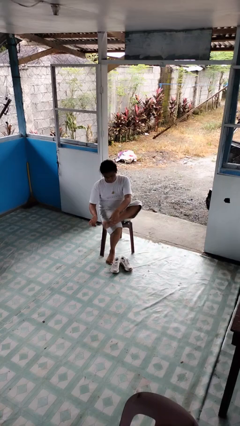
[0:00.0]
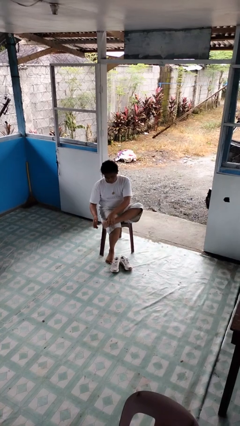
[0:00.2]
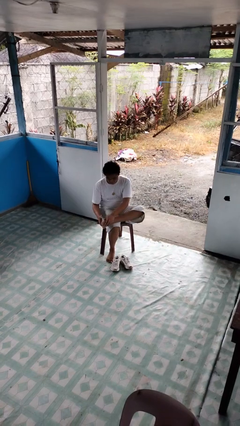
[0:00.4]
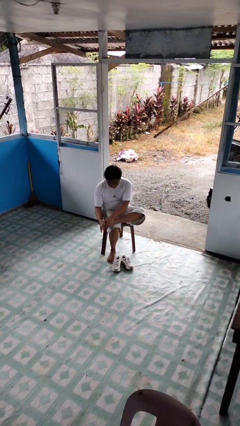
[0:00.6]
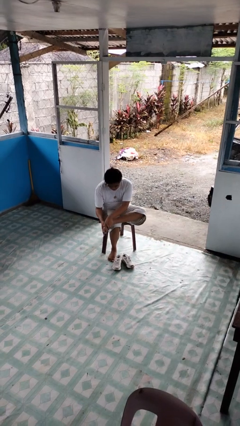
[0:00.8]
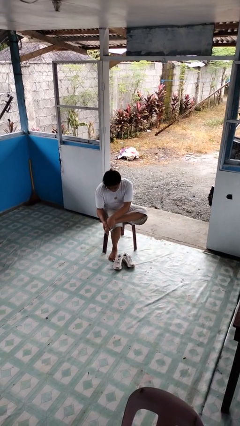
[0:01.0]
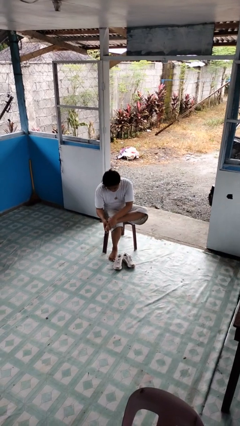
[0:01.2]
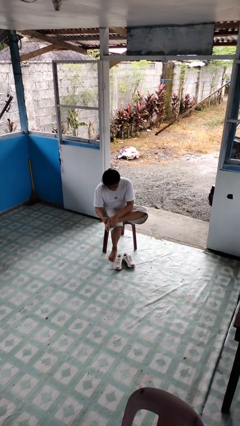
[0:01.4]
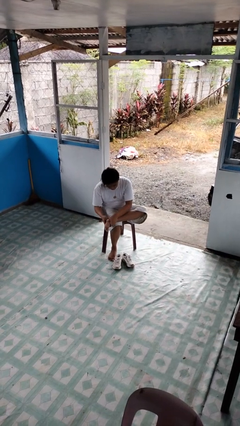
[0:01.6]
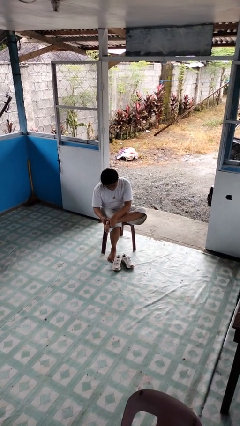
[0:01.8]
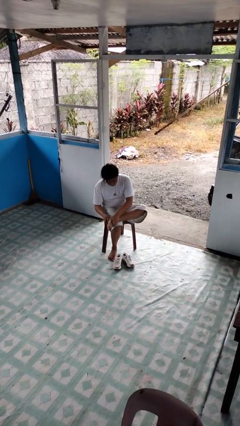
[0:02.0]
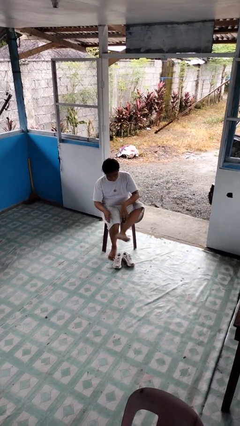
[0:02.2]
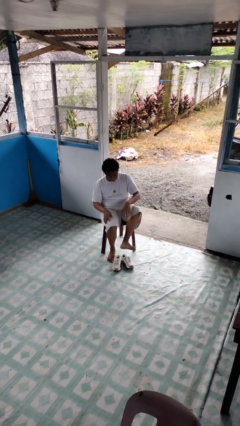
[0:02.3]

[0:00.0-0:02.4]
person rubs foot

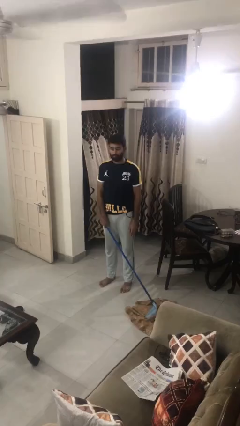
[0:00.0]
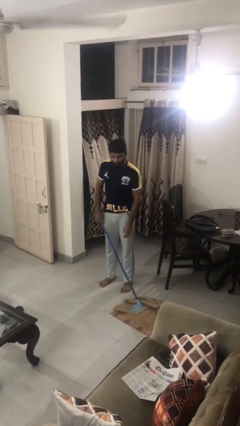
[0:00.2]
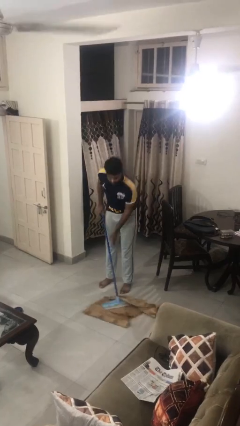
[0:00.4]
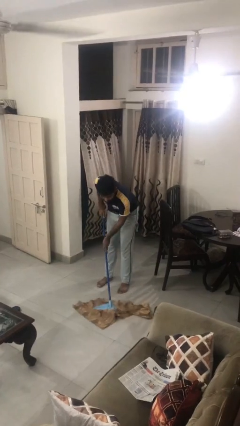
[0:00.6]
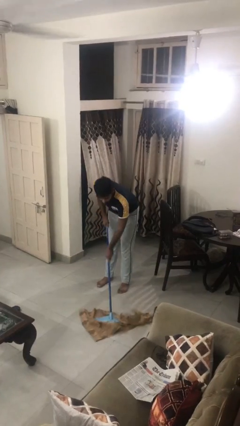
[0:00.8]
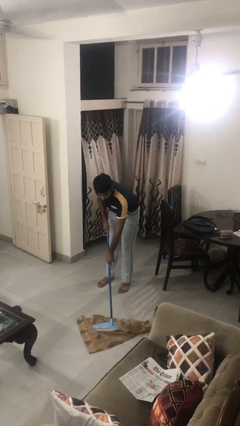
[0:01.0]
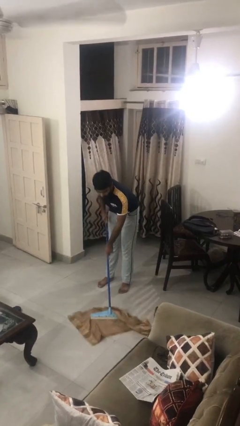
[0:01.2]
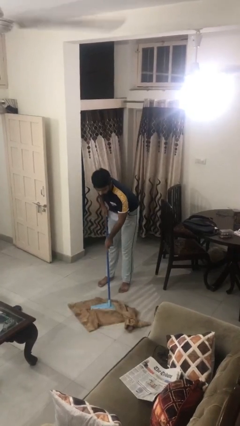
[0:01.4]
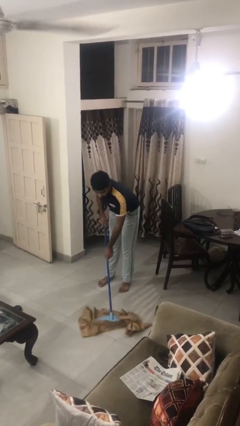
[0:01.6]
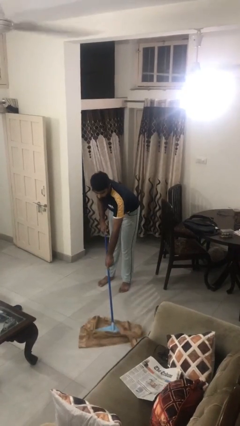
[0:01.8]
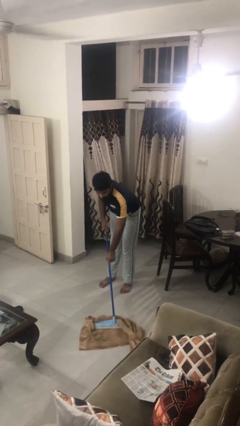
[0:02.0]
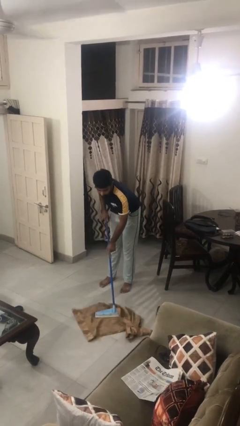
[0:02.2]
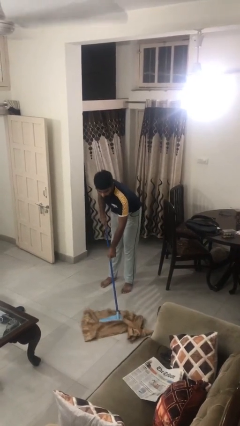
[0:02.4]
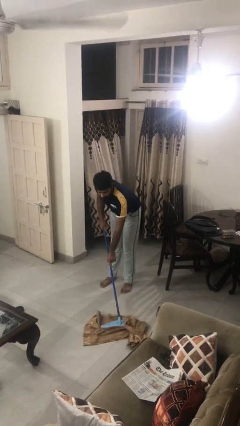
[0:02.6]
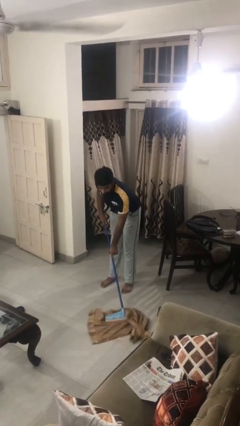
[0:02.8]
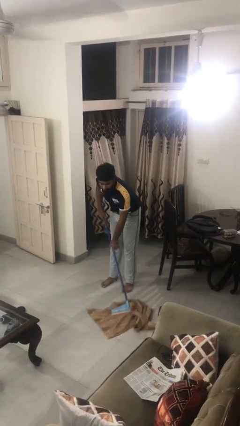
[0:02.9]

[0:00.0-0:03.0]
person mops

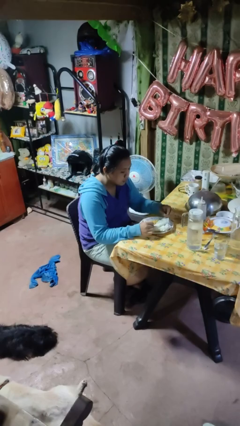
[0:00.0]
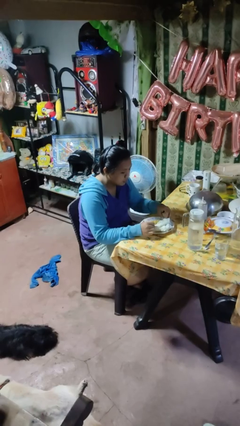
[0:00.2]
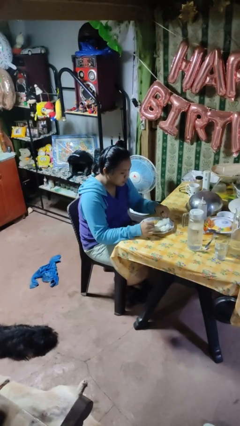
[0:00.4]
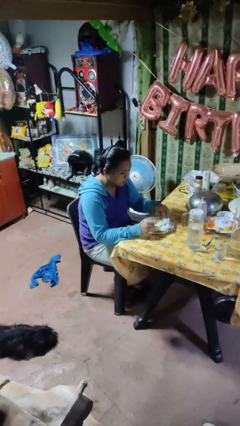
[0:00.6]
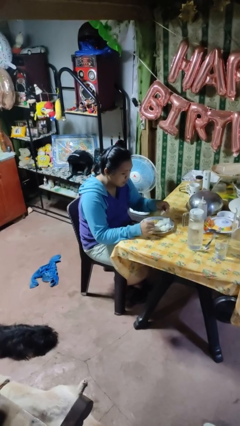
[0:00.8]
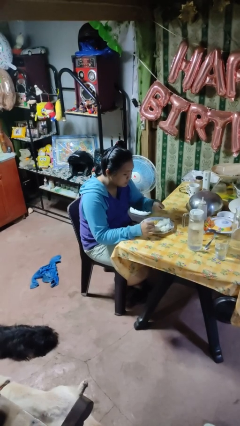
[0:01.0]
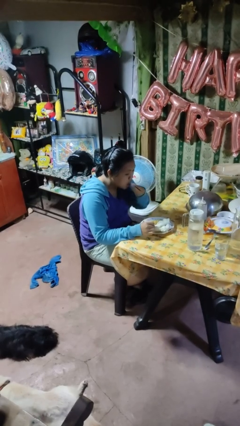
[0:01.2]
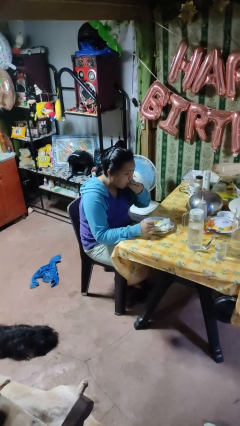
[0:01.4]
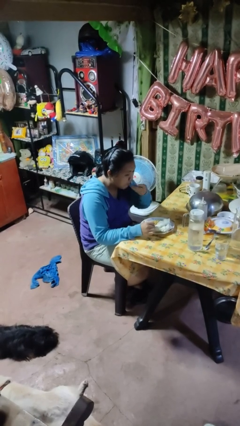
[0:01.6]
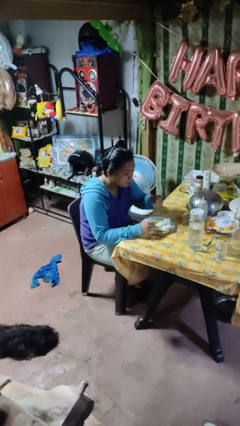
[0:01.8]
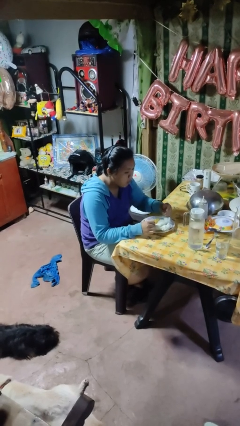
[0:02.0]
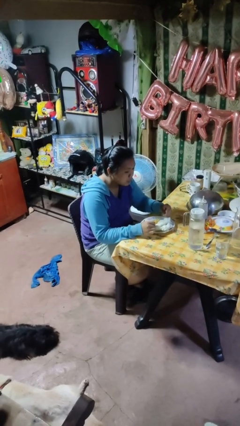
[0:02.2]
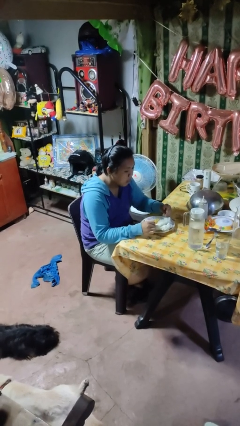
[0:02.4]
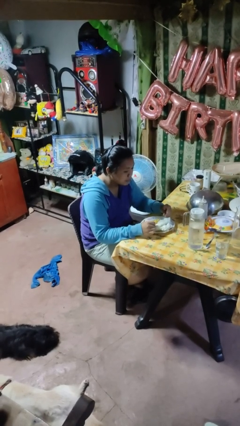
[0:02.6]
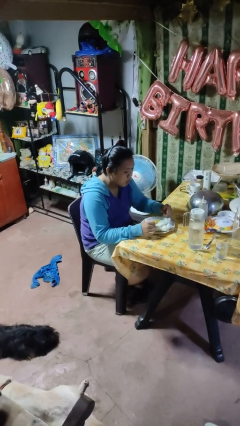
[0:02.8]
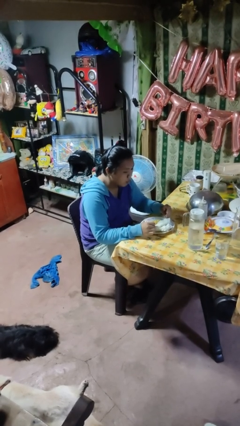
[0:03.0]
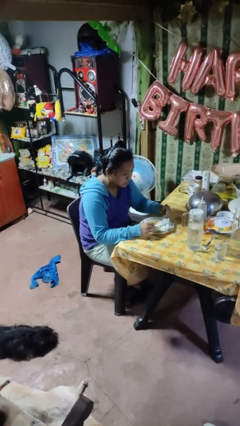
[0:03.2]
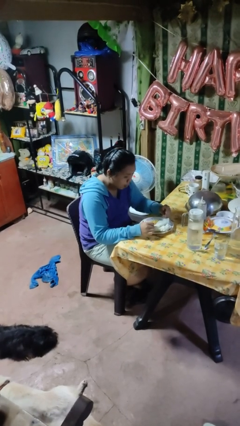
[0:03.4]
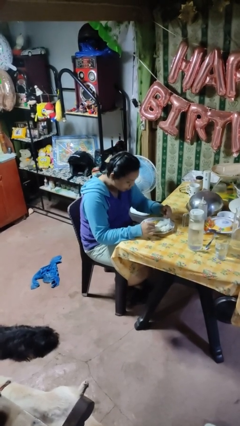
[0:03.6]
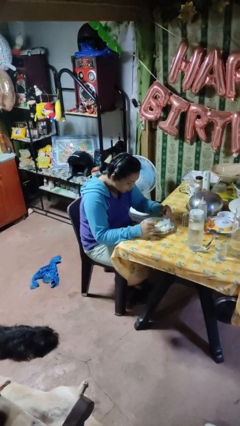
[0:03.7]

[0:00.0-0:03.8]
person eats with hands

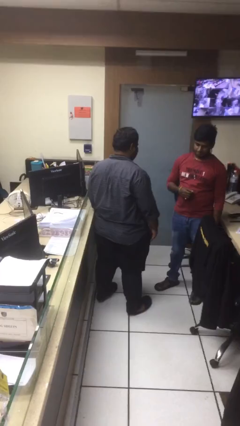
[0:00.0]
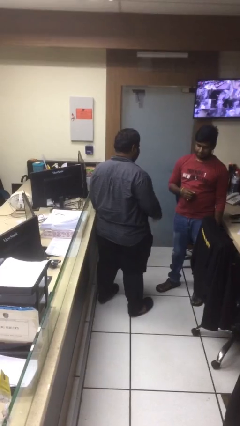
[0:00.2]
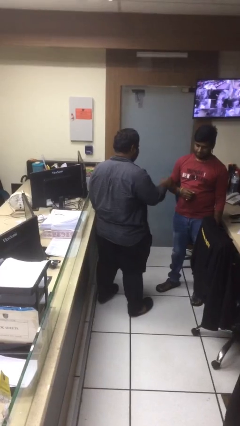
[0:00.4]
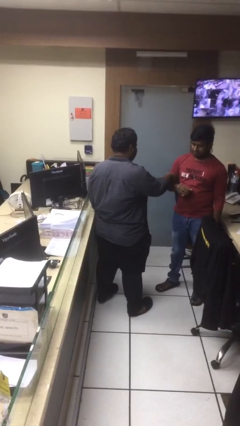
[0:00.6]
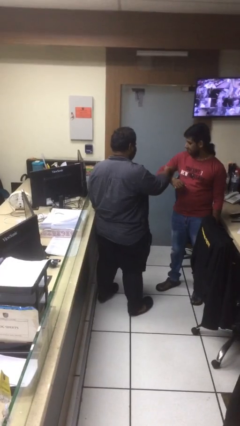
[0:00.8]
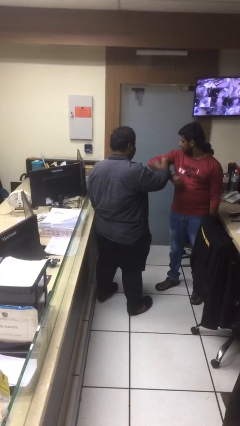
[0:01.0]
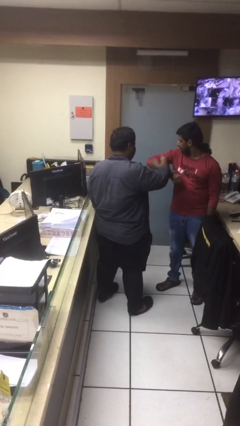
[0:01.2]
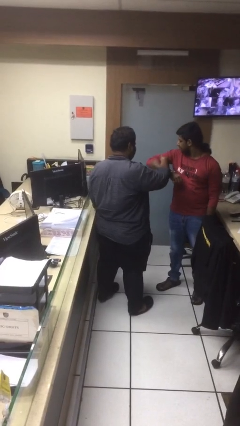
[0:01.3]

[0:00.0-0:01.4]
person grabs person by bicep

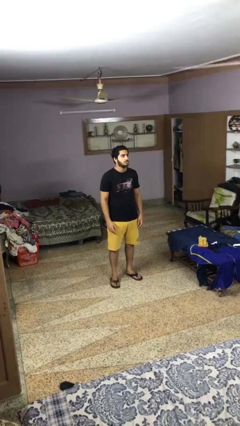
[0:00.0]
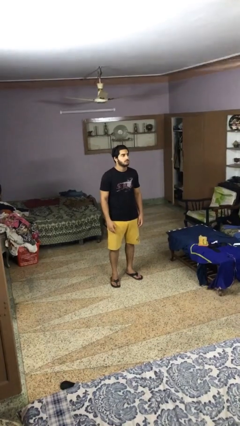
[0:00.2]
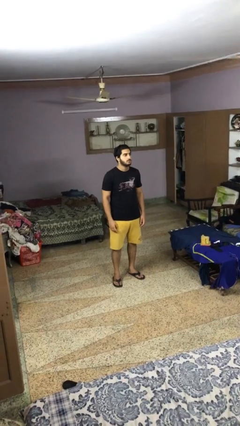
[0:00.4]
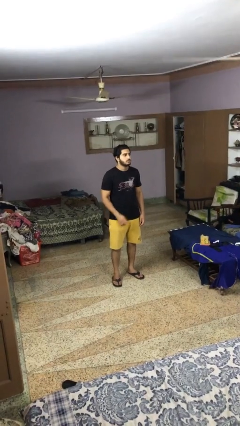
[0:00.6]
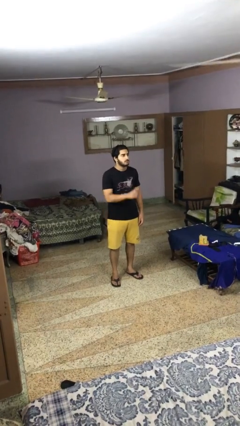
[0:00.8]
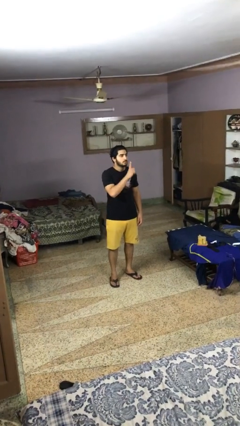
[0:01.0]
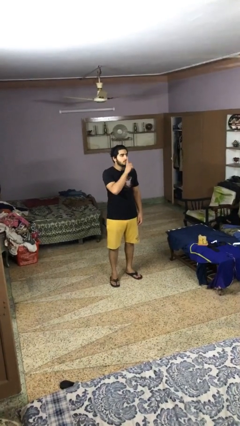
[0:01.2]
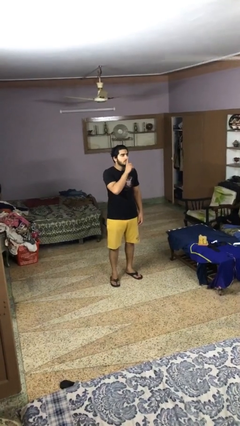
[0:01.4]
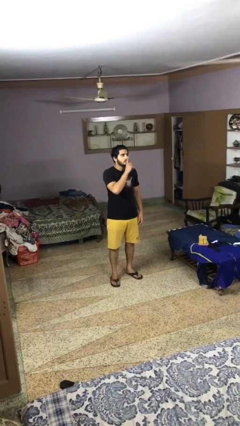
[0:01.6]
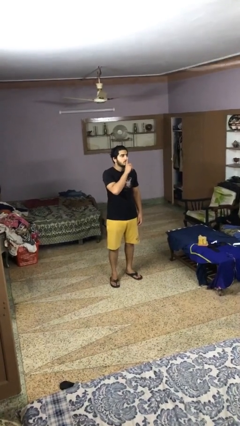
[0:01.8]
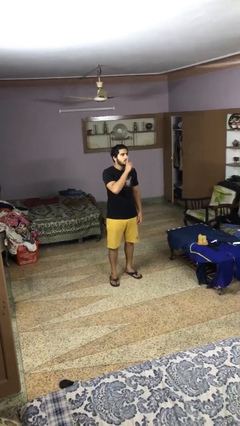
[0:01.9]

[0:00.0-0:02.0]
person gestures be quiet

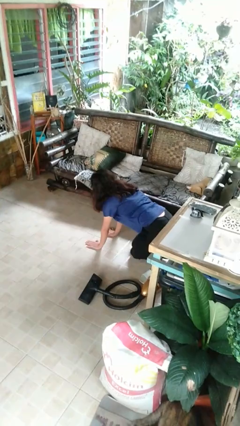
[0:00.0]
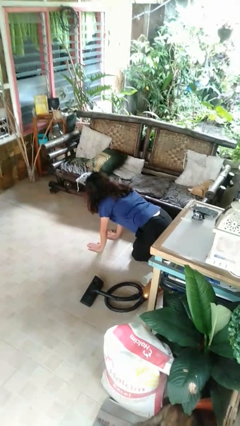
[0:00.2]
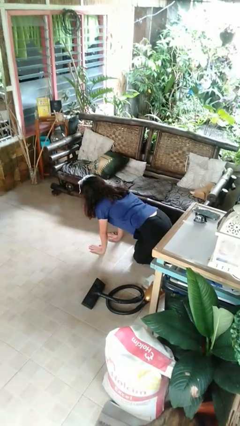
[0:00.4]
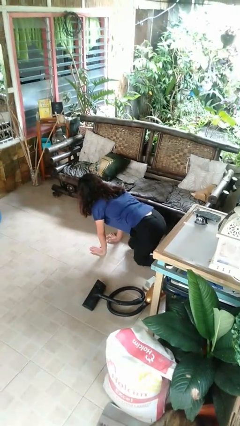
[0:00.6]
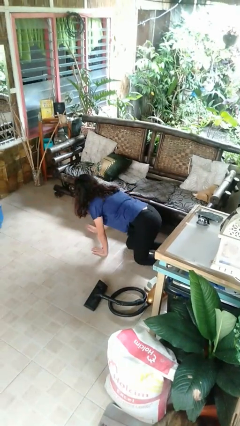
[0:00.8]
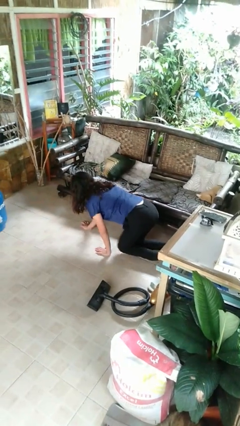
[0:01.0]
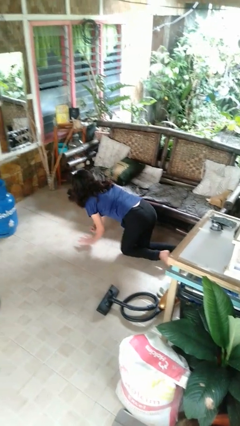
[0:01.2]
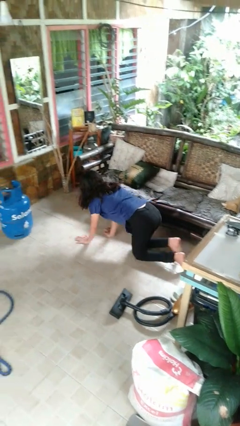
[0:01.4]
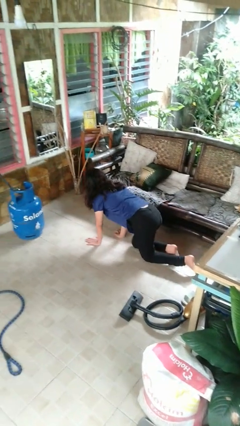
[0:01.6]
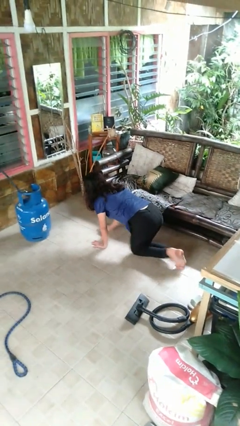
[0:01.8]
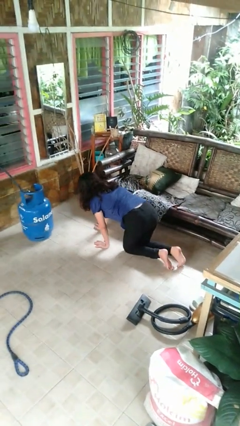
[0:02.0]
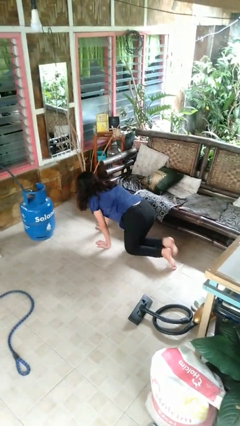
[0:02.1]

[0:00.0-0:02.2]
person crawls

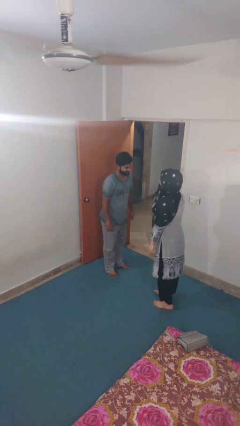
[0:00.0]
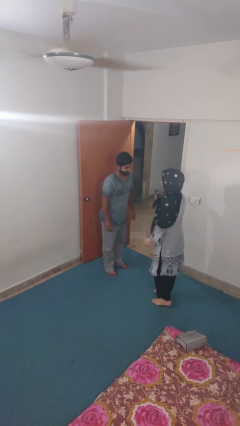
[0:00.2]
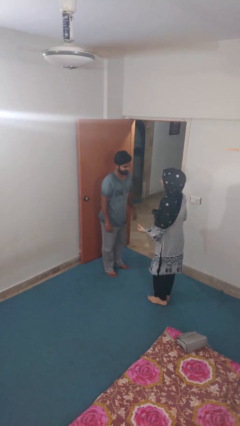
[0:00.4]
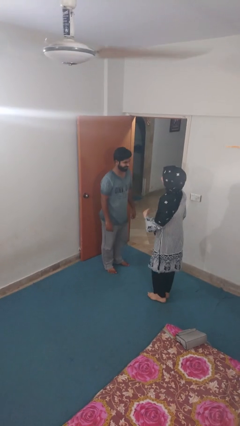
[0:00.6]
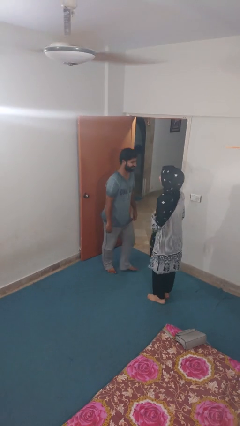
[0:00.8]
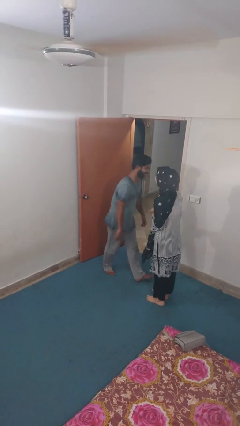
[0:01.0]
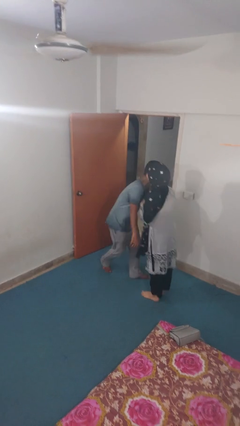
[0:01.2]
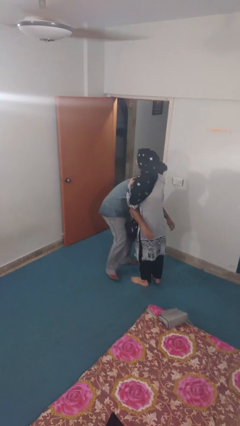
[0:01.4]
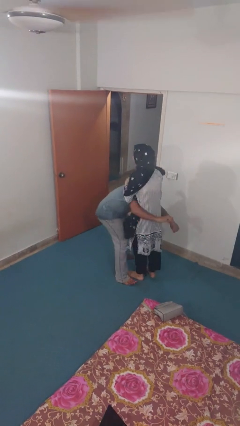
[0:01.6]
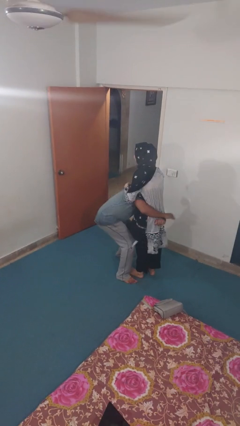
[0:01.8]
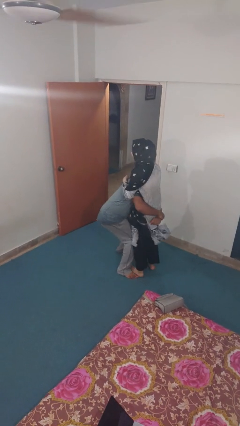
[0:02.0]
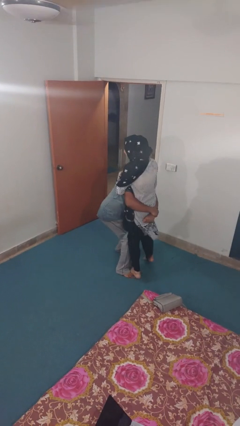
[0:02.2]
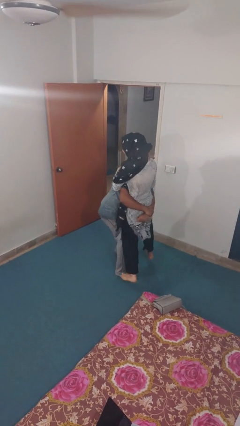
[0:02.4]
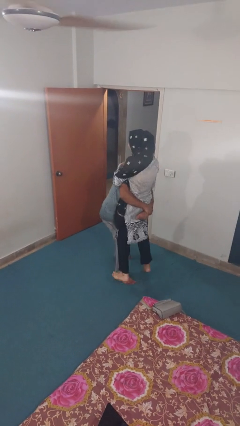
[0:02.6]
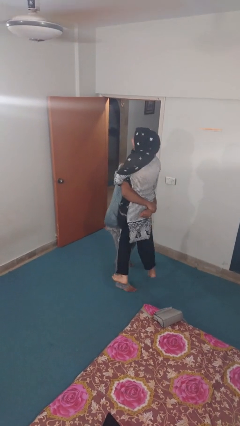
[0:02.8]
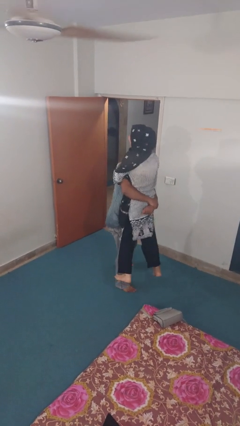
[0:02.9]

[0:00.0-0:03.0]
person picks up person
